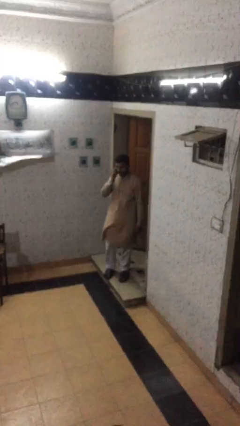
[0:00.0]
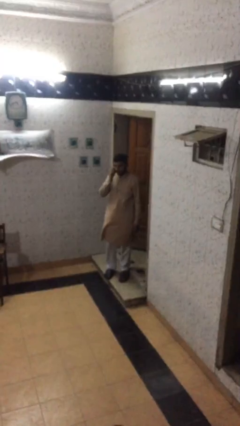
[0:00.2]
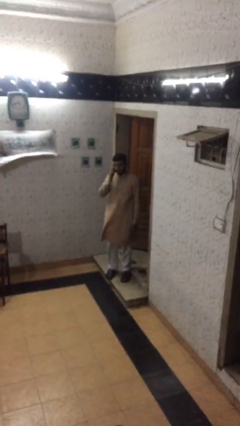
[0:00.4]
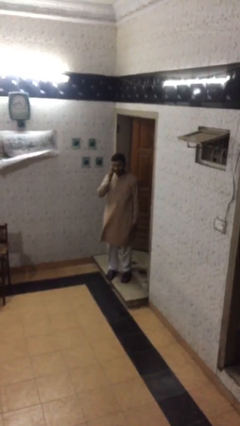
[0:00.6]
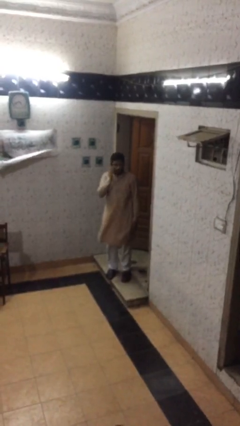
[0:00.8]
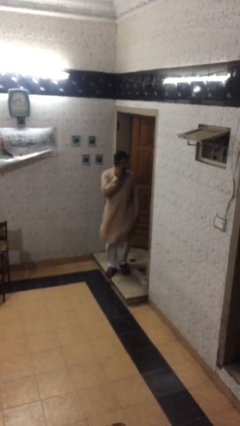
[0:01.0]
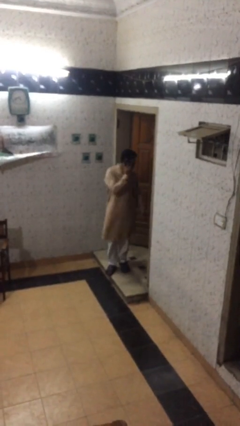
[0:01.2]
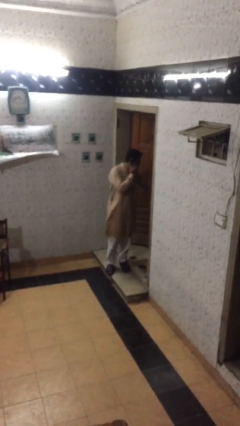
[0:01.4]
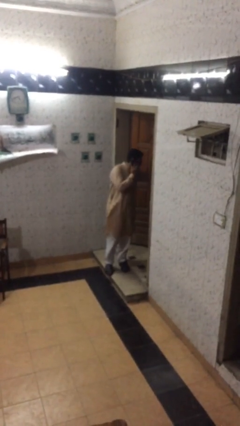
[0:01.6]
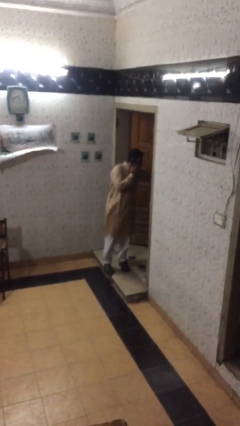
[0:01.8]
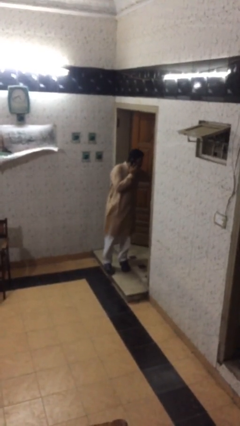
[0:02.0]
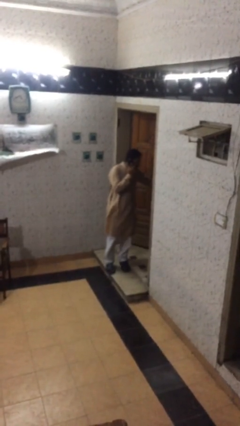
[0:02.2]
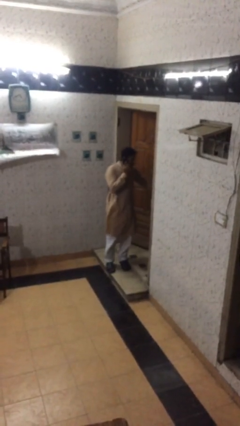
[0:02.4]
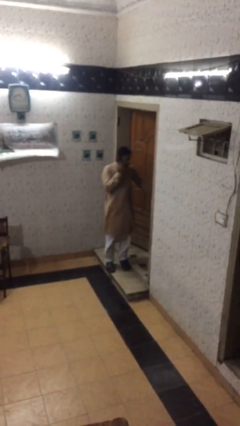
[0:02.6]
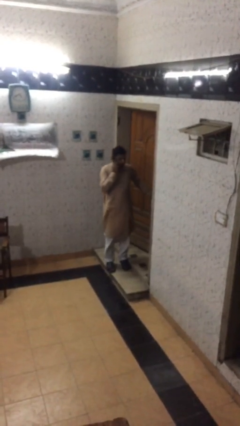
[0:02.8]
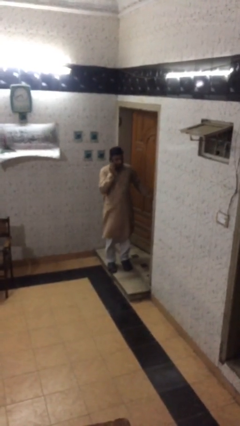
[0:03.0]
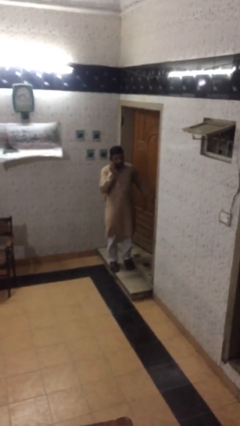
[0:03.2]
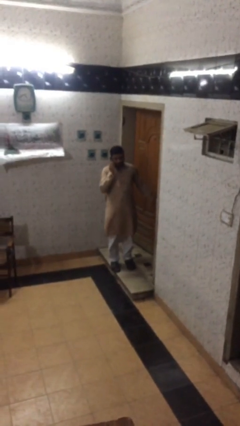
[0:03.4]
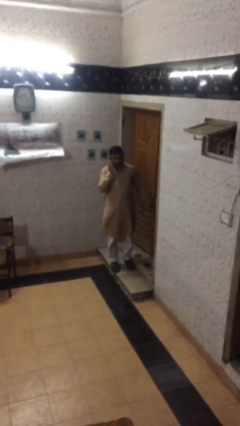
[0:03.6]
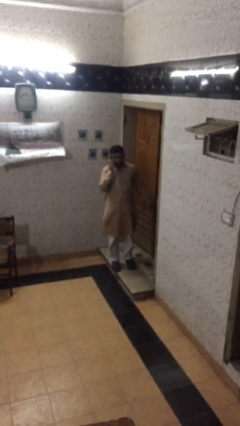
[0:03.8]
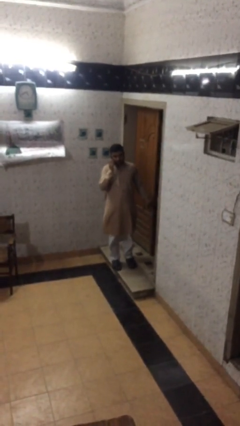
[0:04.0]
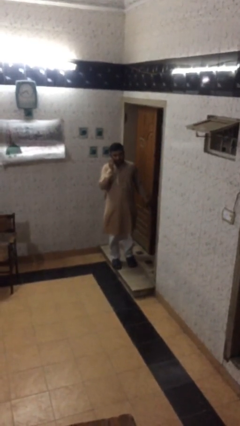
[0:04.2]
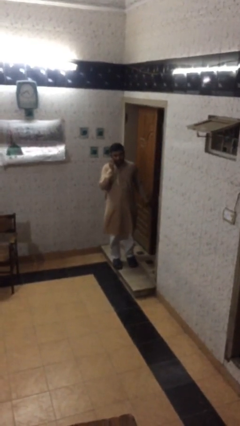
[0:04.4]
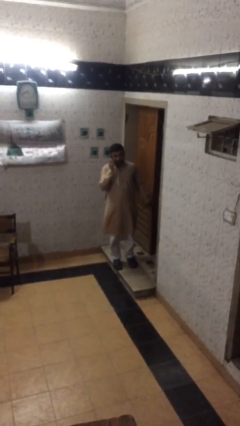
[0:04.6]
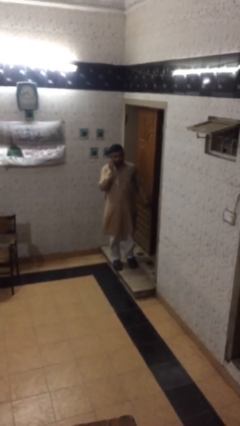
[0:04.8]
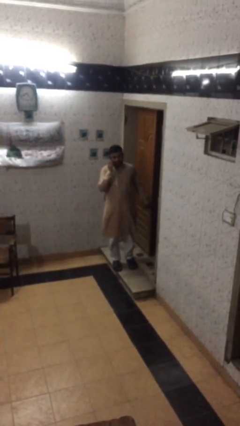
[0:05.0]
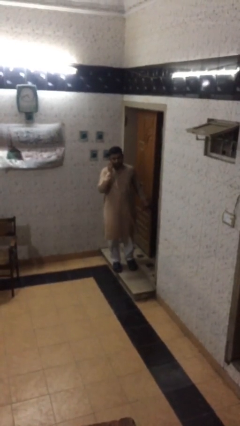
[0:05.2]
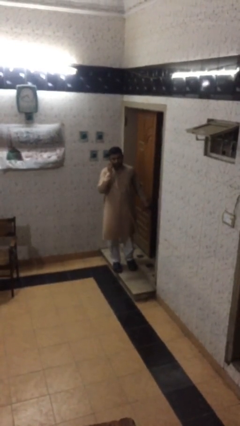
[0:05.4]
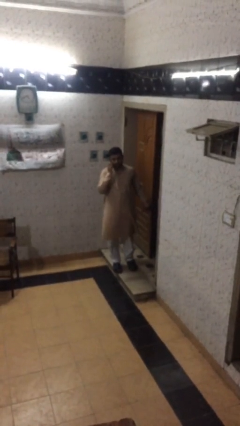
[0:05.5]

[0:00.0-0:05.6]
person closes facility door

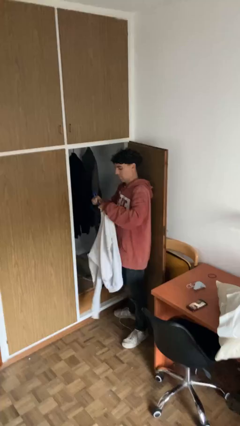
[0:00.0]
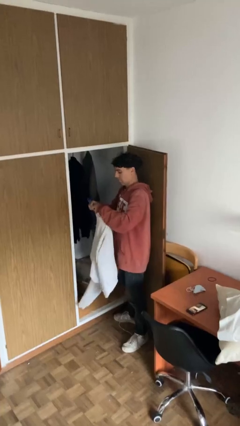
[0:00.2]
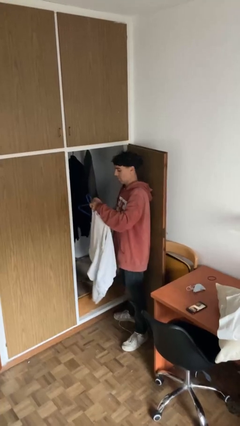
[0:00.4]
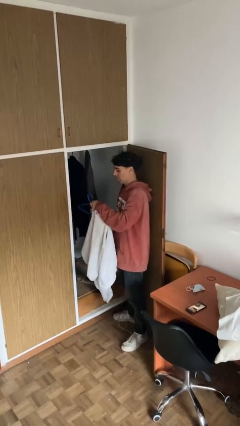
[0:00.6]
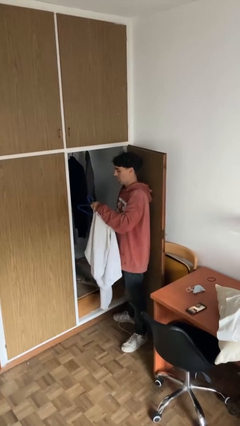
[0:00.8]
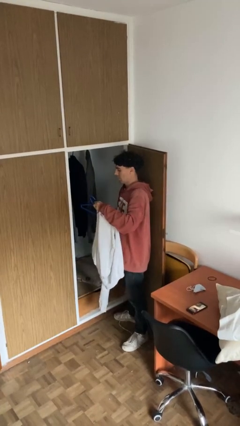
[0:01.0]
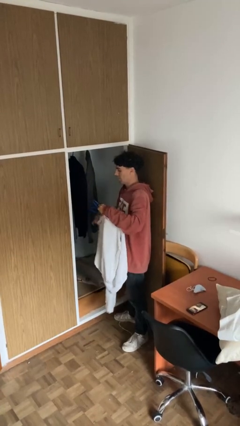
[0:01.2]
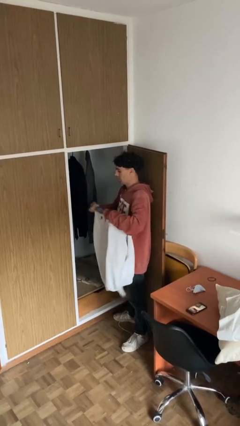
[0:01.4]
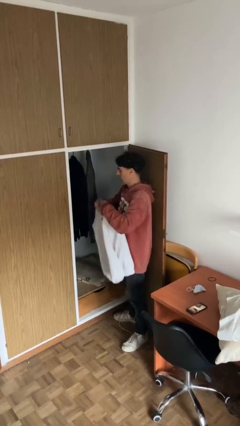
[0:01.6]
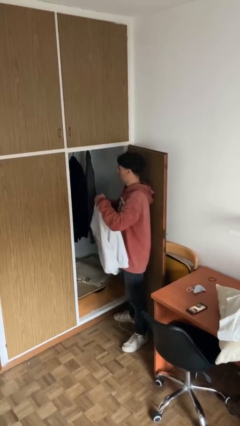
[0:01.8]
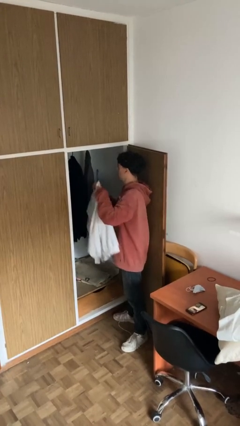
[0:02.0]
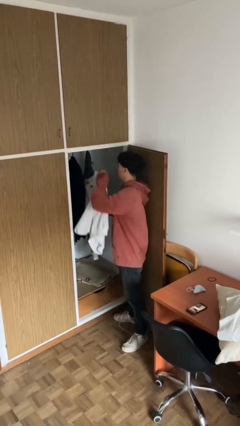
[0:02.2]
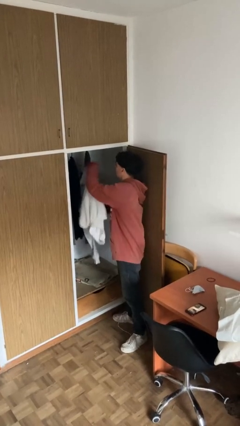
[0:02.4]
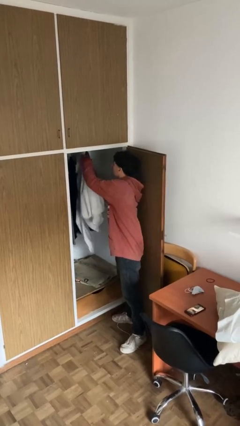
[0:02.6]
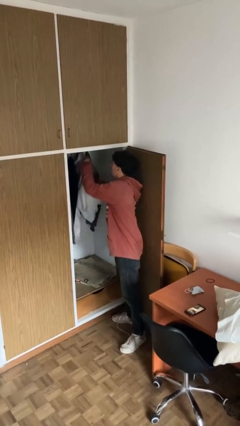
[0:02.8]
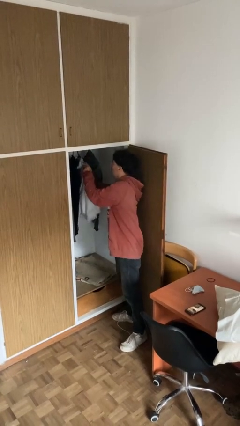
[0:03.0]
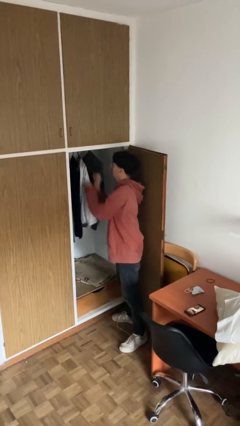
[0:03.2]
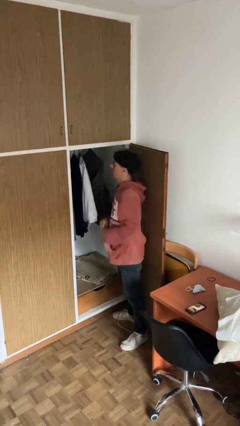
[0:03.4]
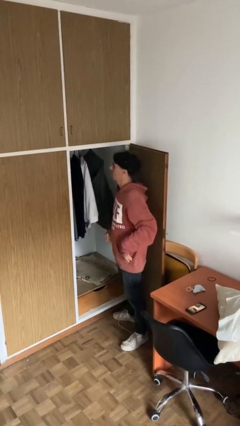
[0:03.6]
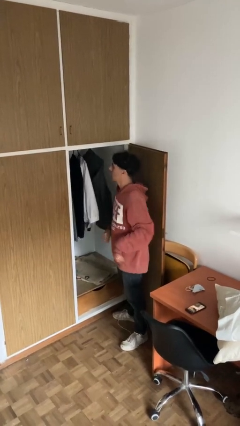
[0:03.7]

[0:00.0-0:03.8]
person puts clothes into closet

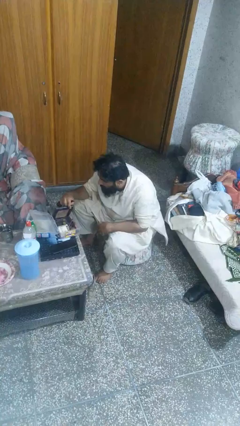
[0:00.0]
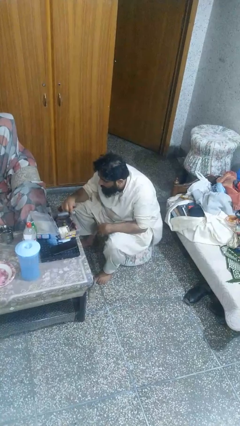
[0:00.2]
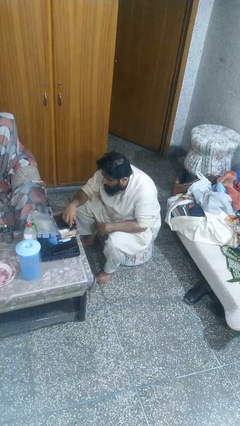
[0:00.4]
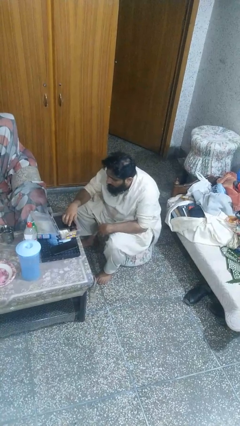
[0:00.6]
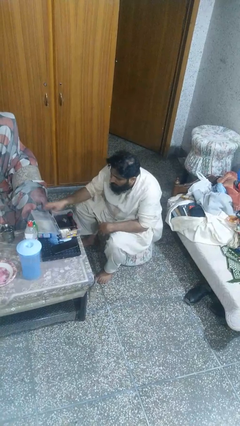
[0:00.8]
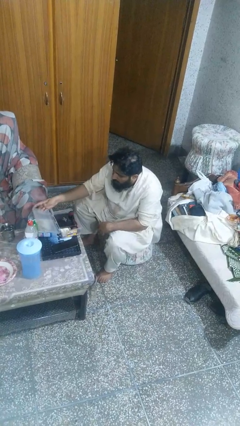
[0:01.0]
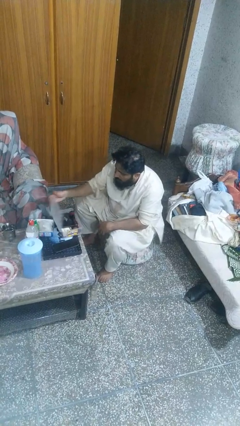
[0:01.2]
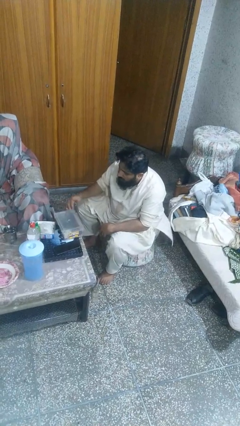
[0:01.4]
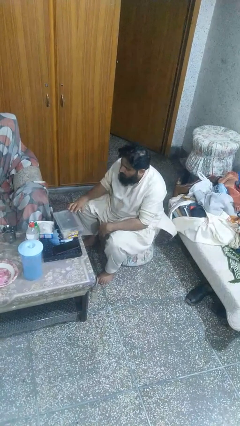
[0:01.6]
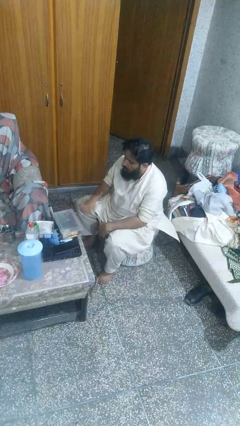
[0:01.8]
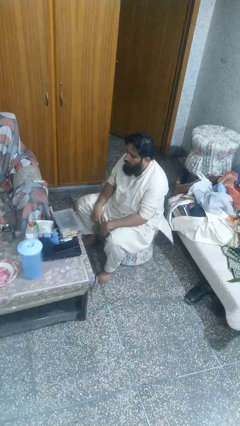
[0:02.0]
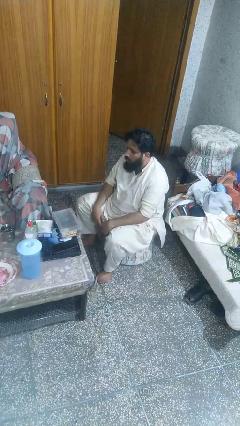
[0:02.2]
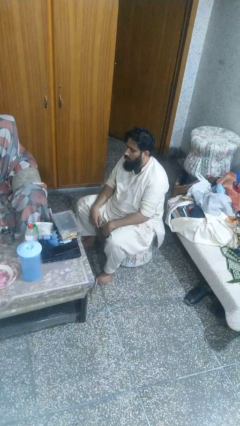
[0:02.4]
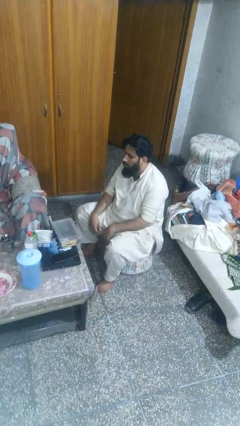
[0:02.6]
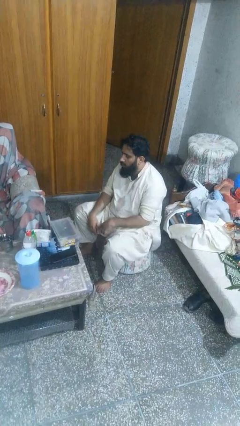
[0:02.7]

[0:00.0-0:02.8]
person closes jewelry box

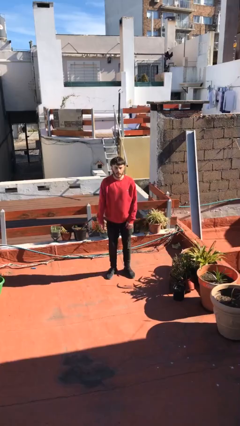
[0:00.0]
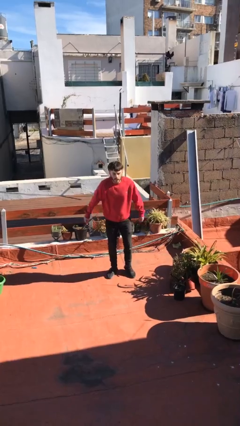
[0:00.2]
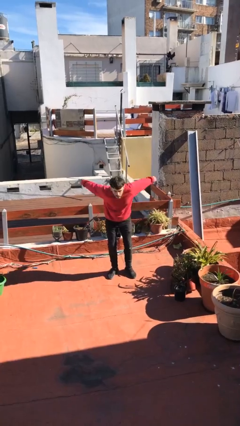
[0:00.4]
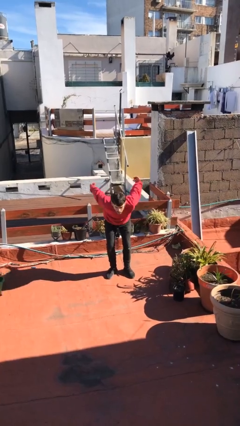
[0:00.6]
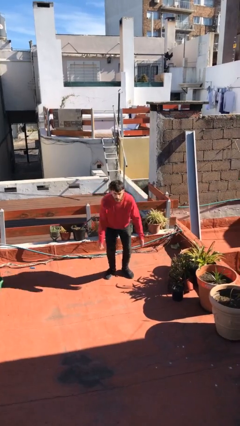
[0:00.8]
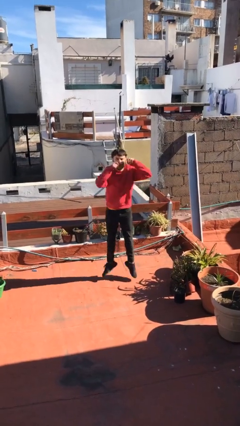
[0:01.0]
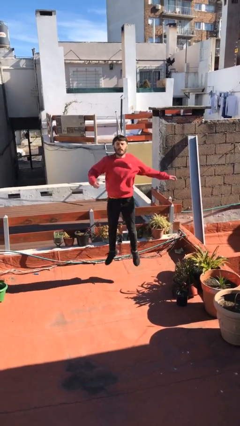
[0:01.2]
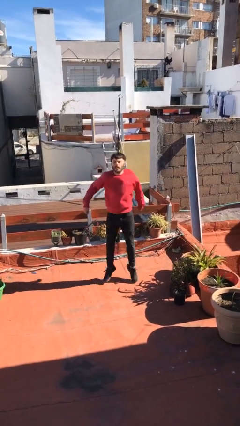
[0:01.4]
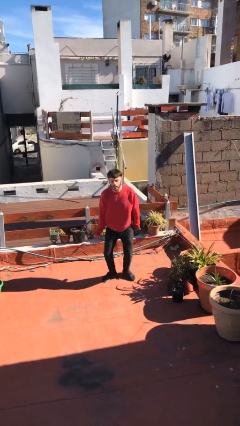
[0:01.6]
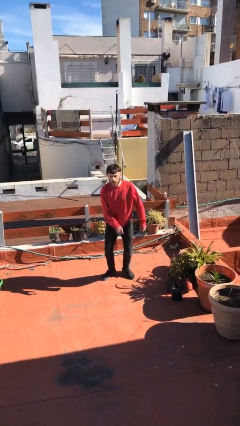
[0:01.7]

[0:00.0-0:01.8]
person jumps

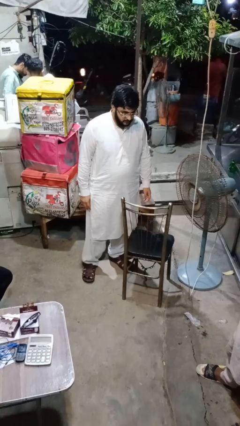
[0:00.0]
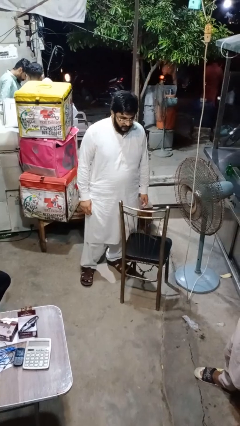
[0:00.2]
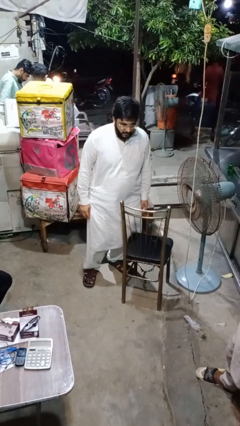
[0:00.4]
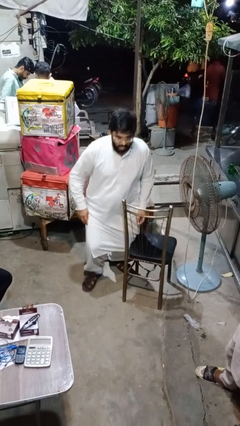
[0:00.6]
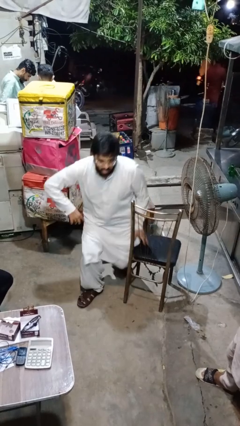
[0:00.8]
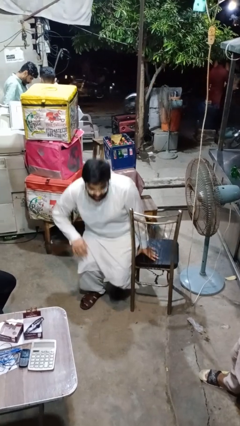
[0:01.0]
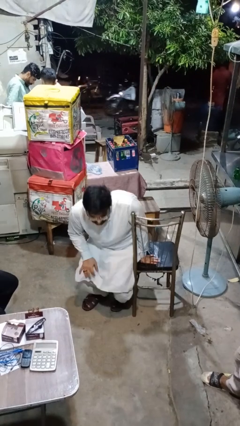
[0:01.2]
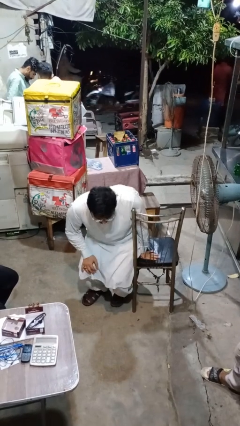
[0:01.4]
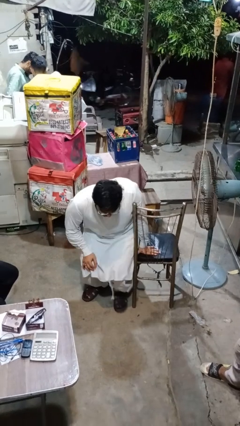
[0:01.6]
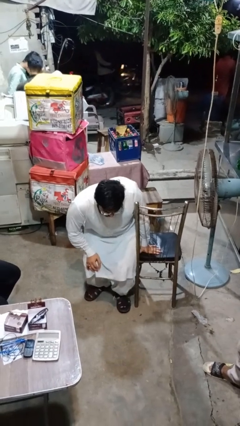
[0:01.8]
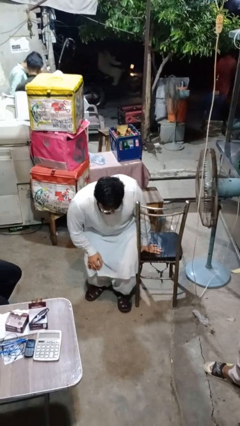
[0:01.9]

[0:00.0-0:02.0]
person lies down on floor

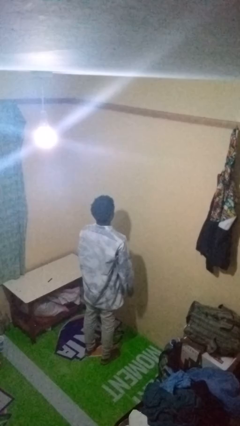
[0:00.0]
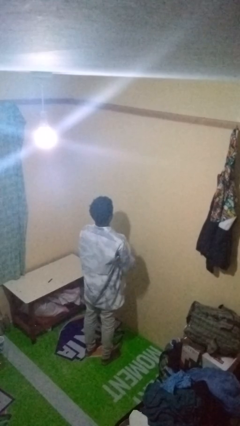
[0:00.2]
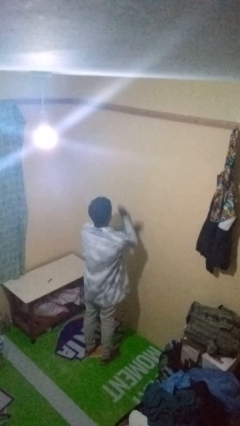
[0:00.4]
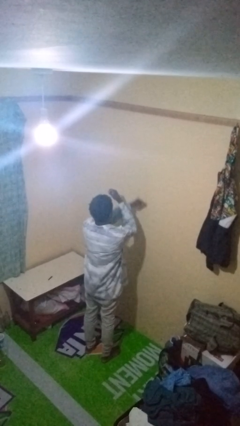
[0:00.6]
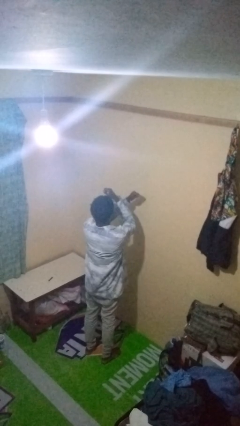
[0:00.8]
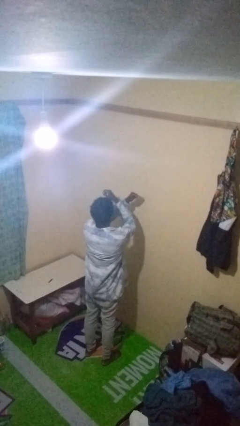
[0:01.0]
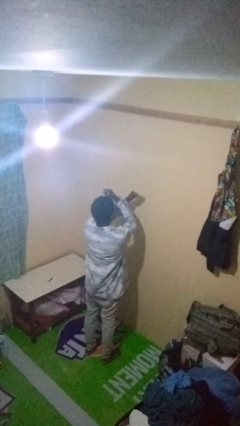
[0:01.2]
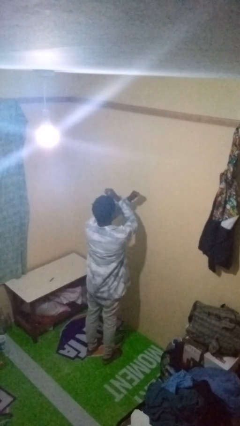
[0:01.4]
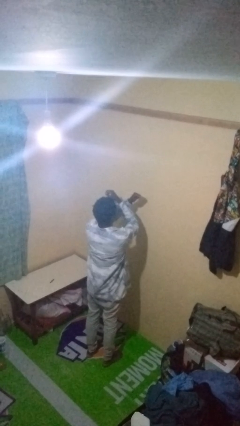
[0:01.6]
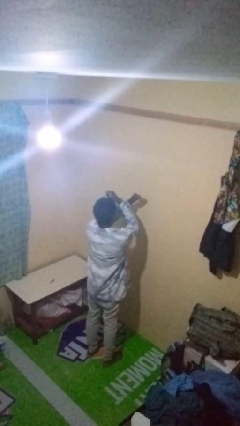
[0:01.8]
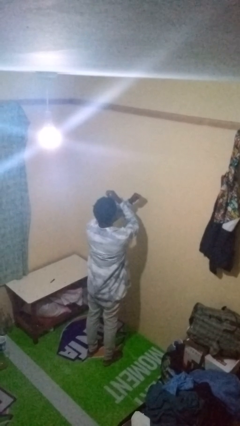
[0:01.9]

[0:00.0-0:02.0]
person gestures arms x
